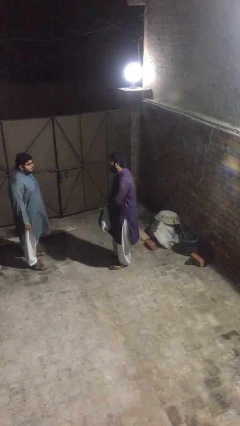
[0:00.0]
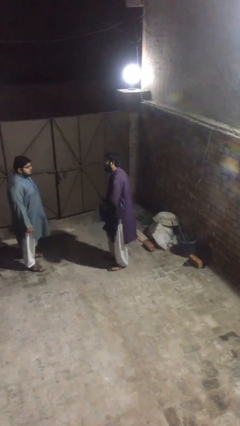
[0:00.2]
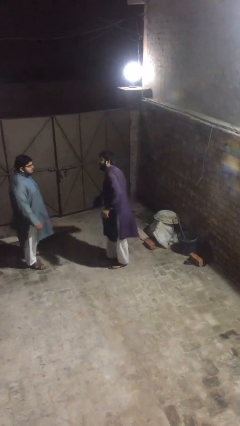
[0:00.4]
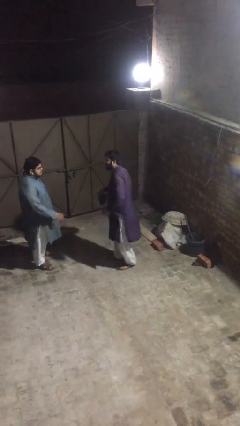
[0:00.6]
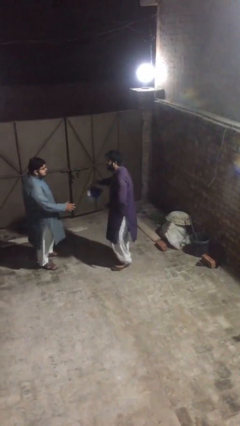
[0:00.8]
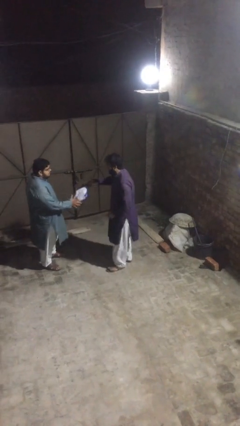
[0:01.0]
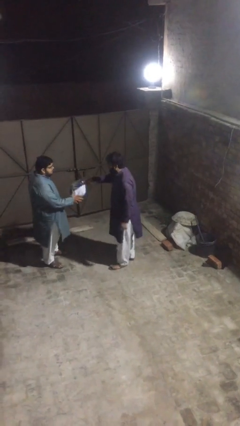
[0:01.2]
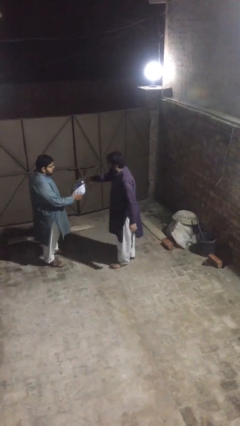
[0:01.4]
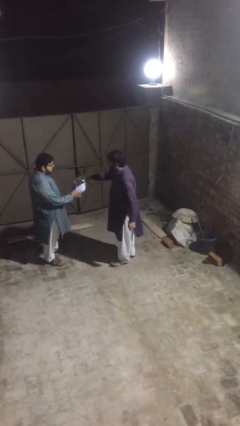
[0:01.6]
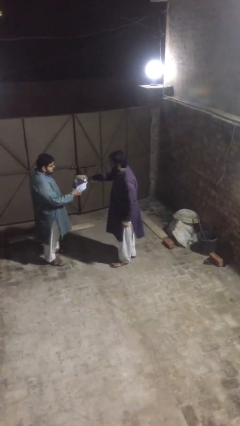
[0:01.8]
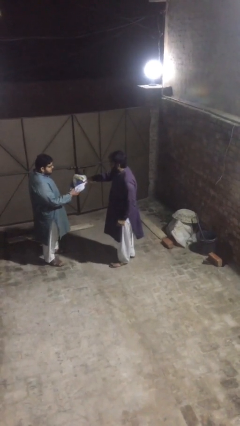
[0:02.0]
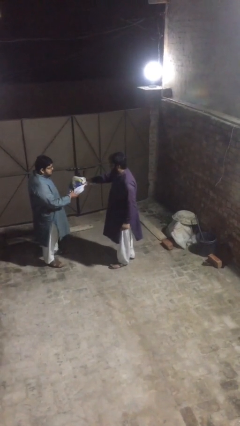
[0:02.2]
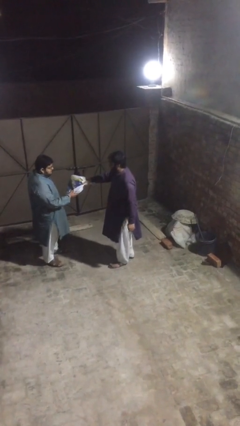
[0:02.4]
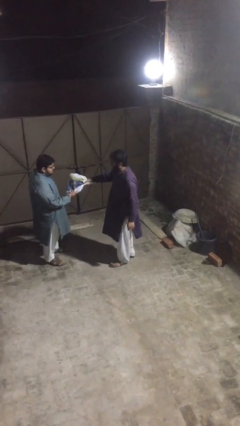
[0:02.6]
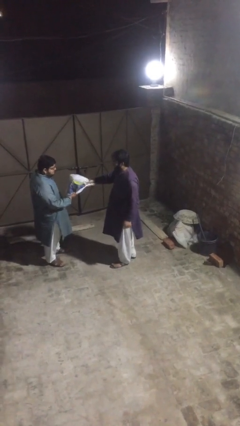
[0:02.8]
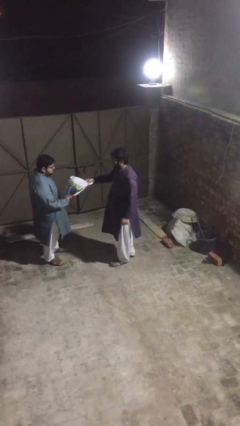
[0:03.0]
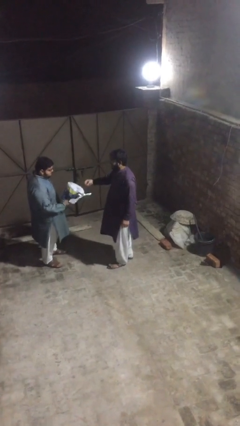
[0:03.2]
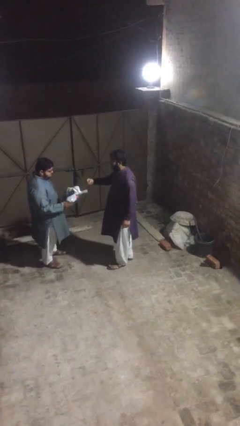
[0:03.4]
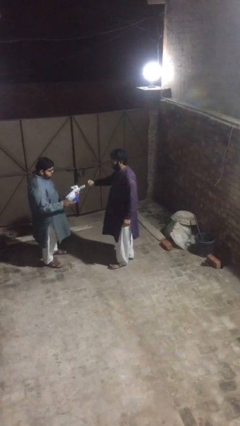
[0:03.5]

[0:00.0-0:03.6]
person transfers object to person

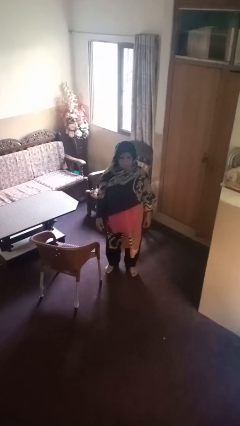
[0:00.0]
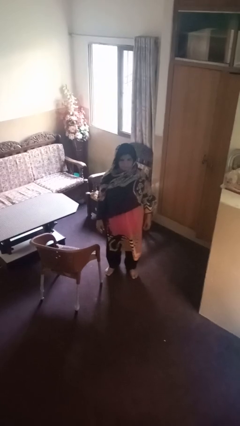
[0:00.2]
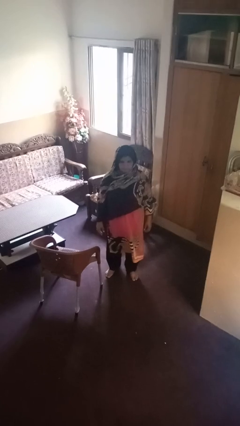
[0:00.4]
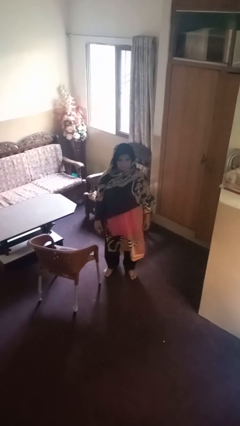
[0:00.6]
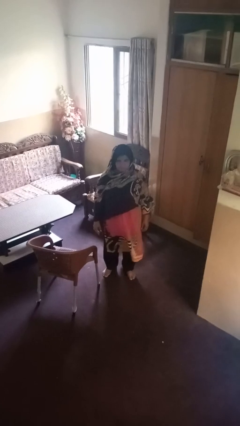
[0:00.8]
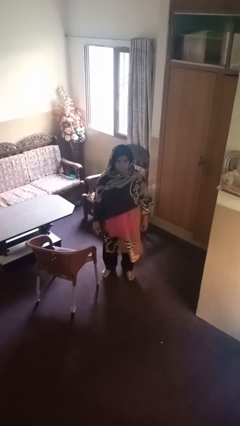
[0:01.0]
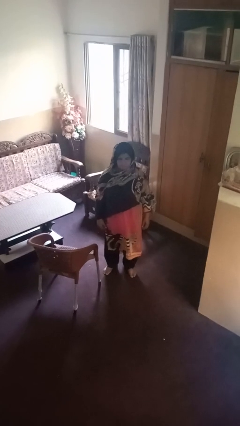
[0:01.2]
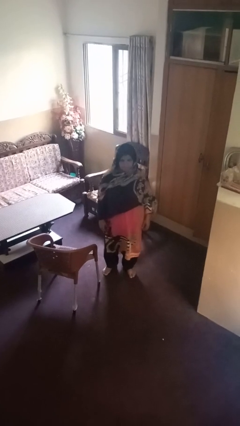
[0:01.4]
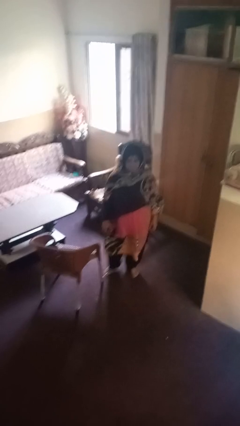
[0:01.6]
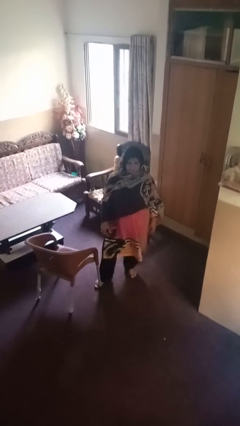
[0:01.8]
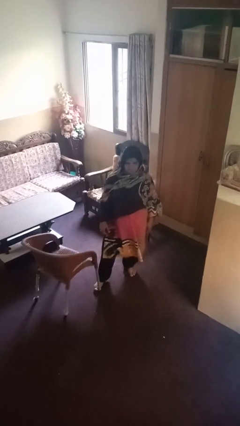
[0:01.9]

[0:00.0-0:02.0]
person trips on object on floor

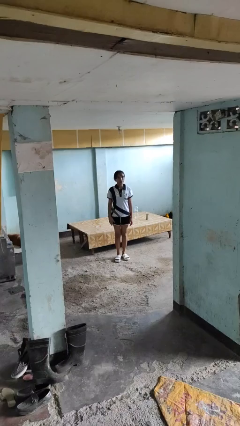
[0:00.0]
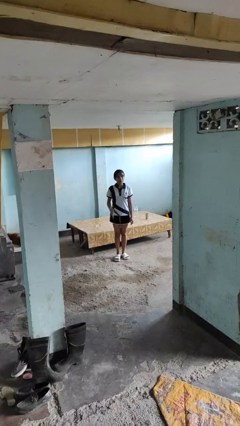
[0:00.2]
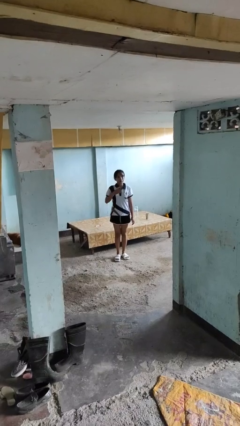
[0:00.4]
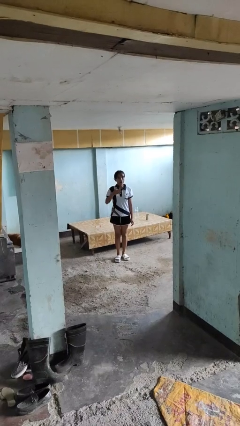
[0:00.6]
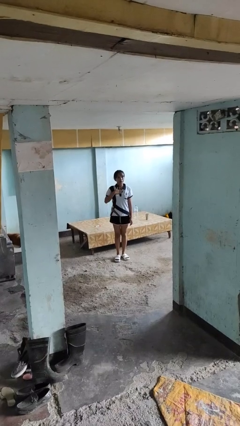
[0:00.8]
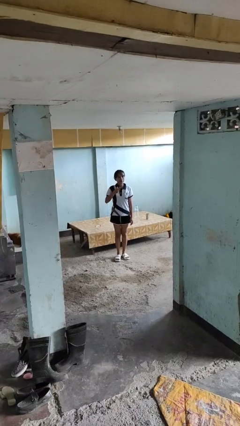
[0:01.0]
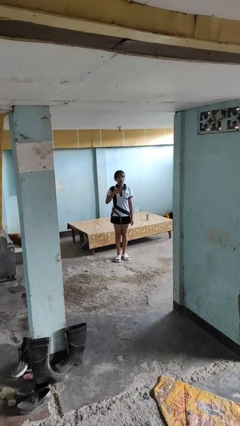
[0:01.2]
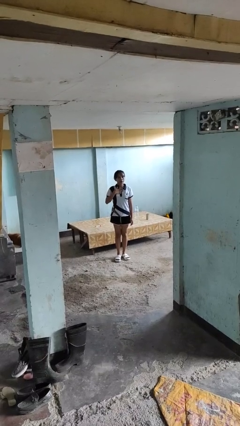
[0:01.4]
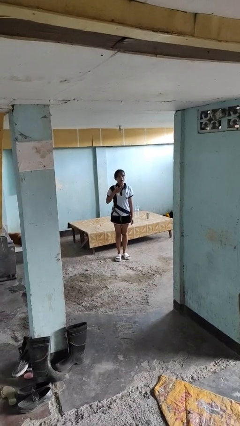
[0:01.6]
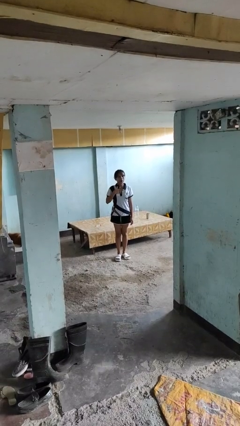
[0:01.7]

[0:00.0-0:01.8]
person drums on chest

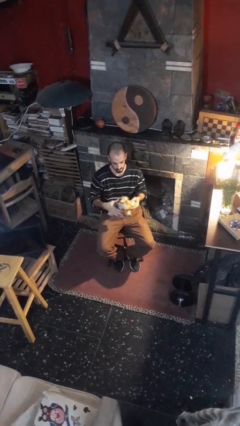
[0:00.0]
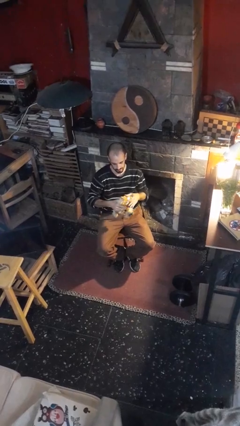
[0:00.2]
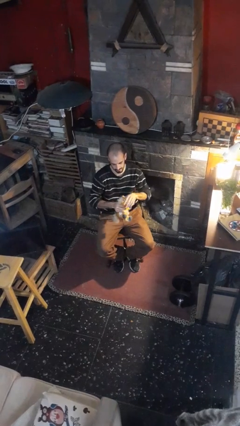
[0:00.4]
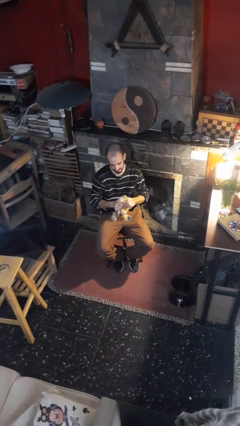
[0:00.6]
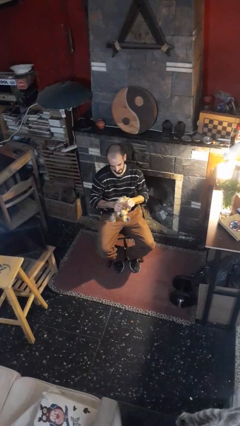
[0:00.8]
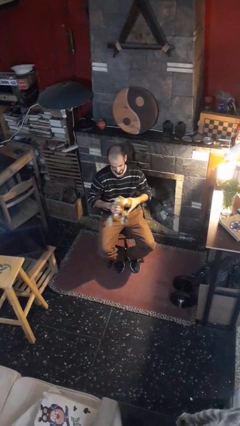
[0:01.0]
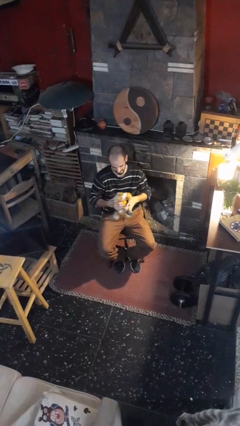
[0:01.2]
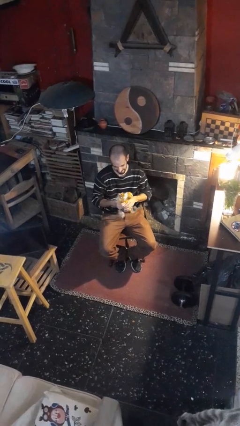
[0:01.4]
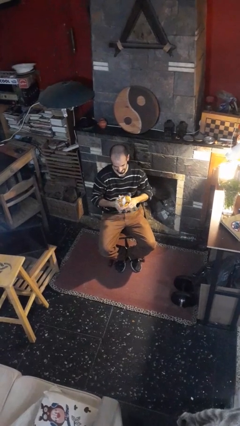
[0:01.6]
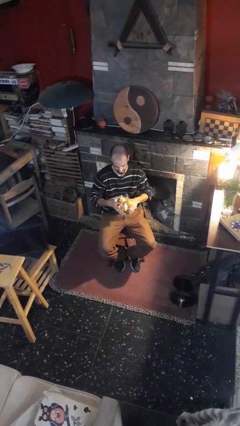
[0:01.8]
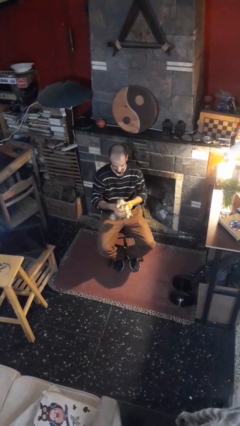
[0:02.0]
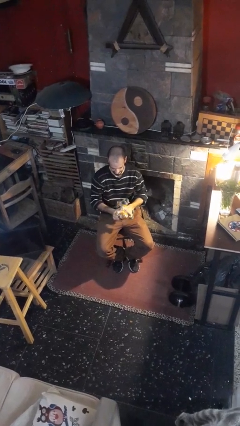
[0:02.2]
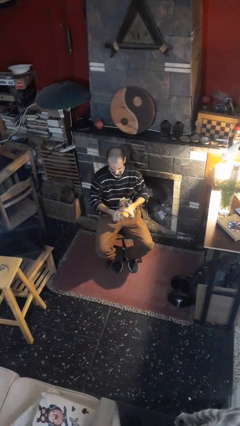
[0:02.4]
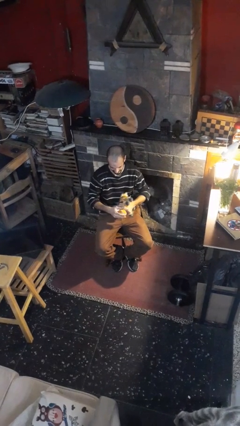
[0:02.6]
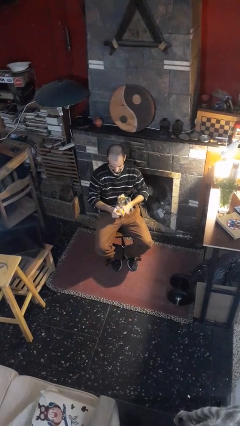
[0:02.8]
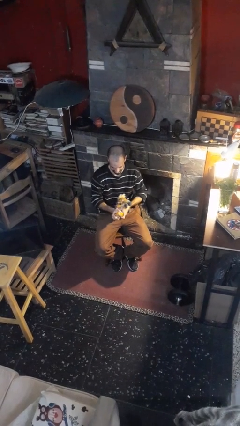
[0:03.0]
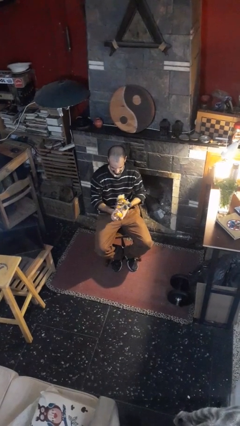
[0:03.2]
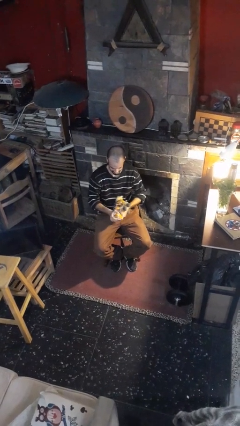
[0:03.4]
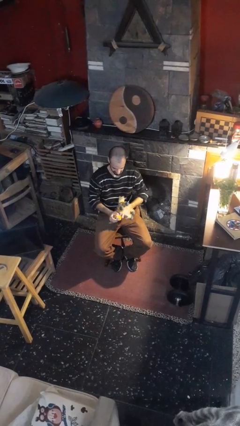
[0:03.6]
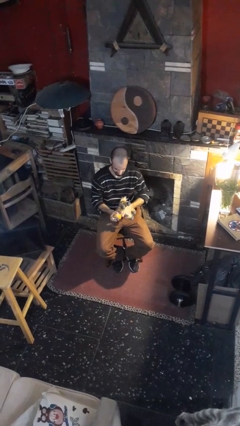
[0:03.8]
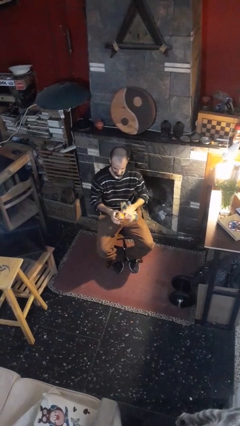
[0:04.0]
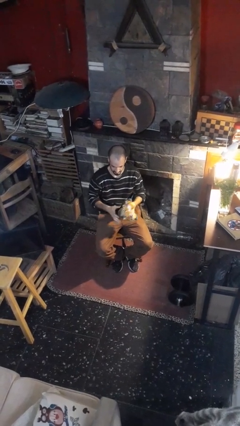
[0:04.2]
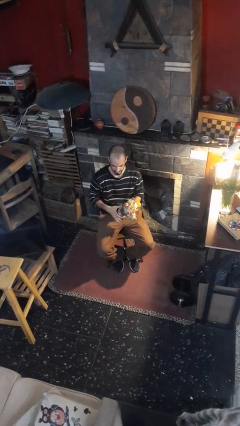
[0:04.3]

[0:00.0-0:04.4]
person squeezes object

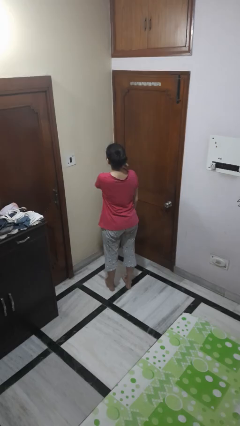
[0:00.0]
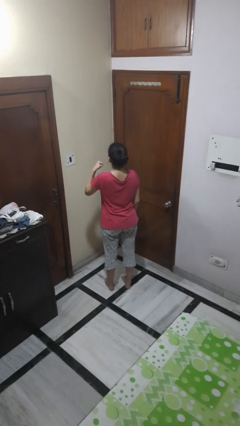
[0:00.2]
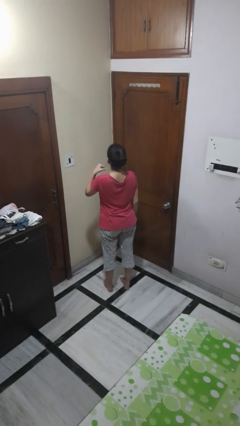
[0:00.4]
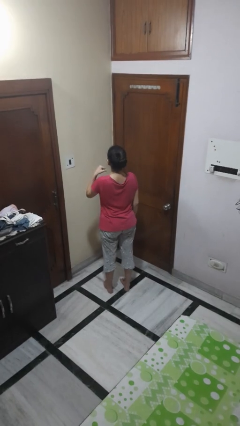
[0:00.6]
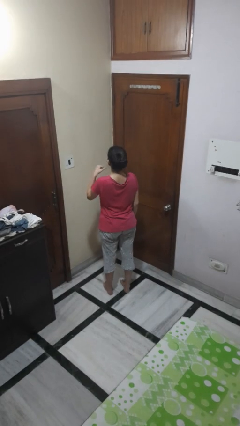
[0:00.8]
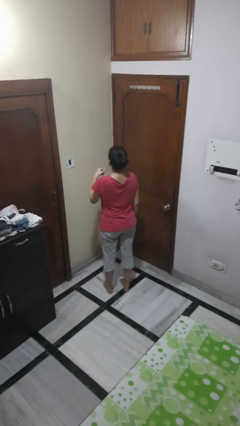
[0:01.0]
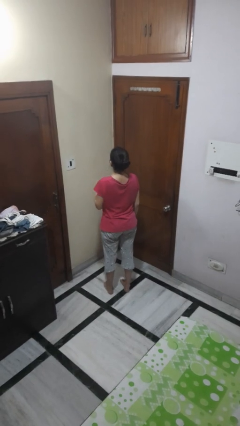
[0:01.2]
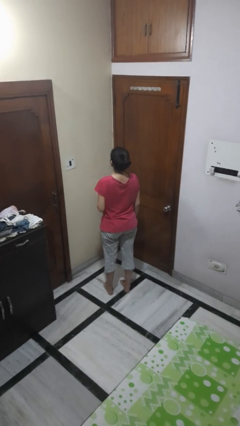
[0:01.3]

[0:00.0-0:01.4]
person gestures cut

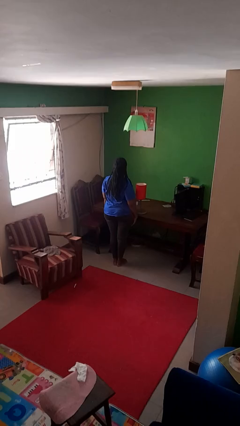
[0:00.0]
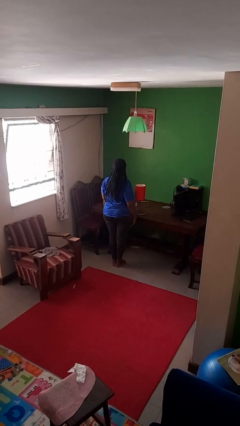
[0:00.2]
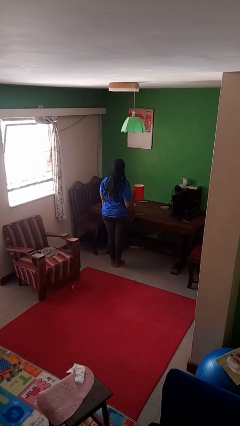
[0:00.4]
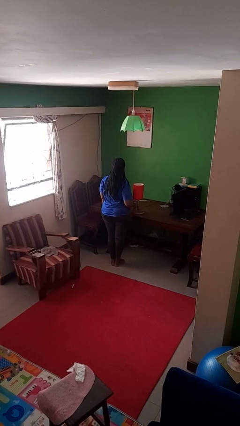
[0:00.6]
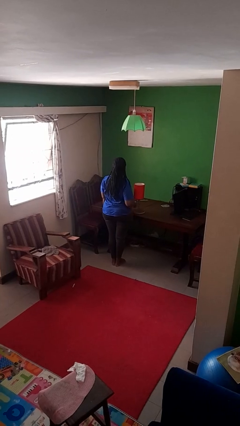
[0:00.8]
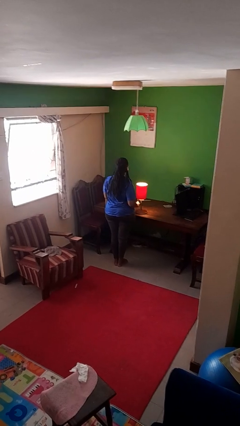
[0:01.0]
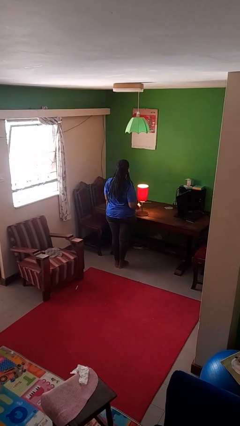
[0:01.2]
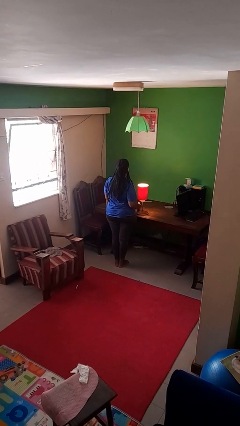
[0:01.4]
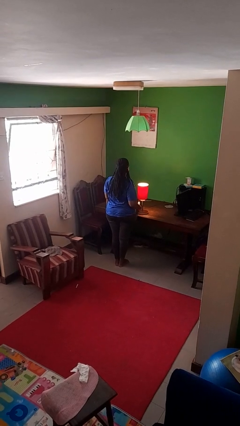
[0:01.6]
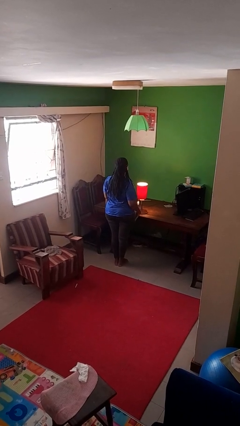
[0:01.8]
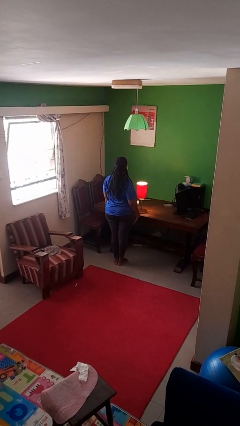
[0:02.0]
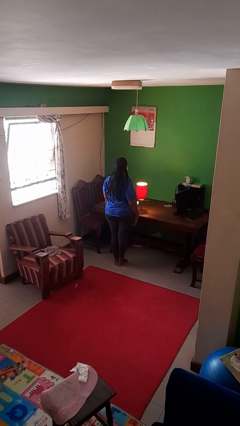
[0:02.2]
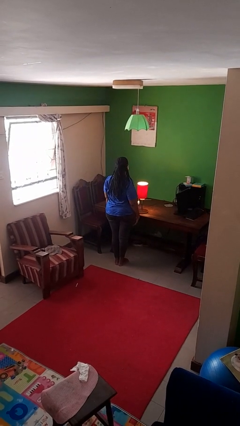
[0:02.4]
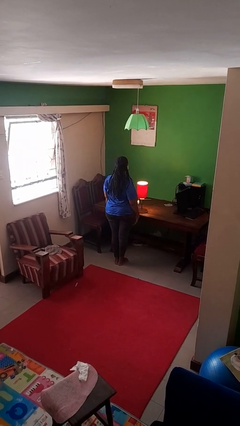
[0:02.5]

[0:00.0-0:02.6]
person turns on lamp

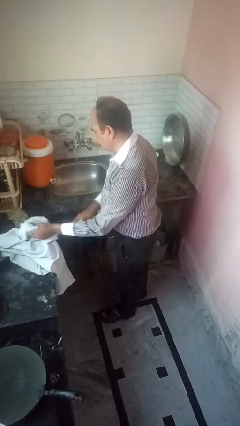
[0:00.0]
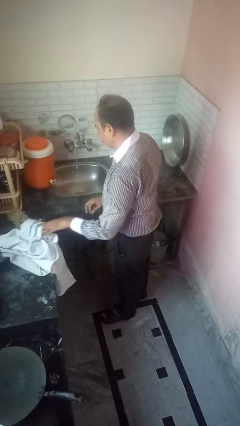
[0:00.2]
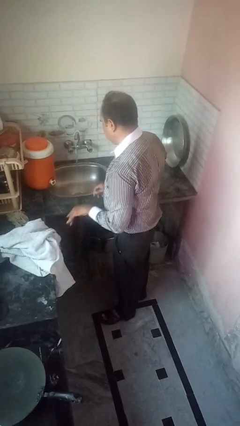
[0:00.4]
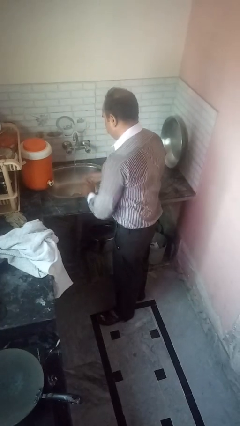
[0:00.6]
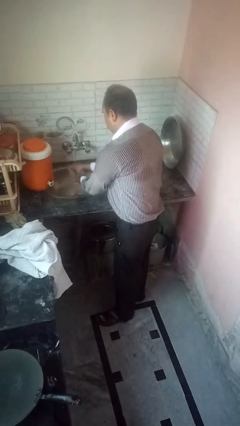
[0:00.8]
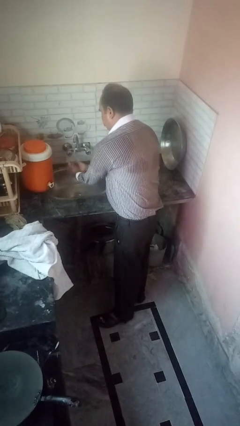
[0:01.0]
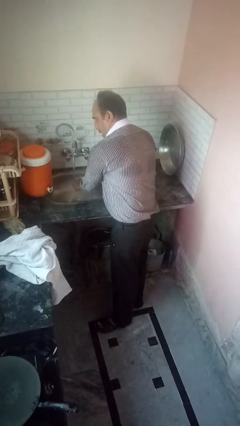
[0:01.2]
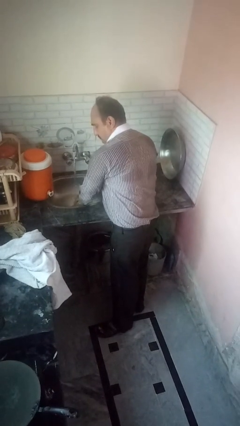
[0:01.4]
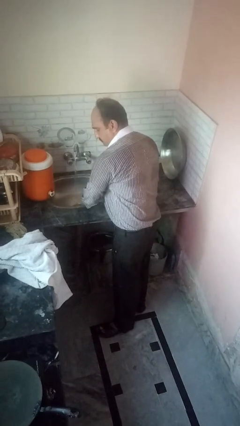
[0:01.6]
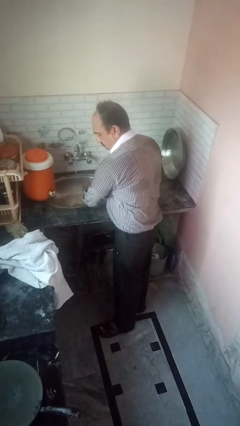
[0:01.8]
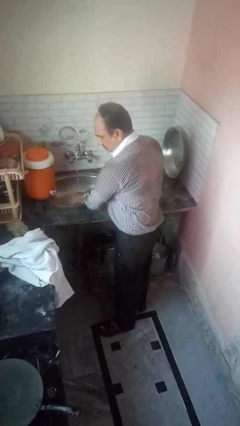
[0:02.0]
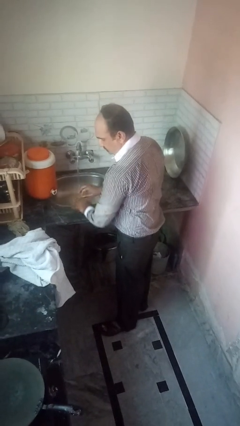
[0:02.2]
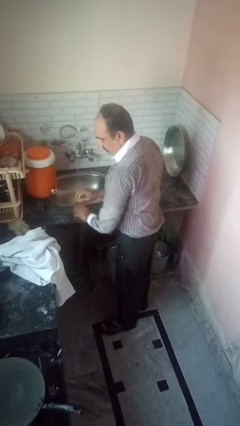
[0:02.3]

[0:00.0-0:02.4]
person washes hands
